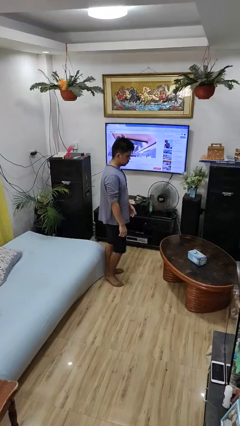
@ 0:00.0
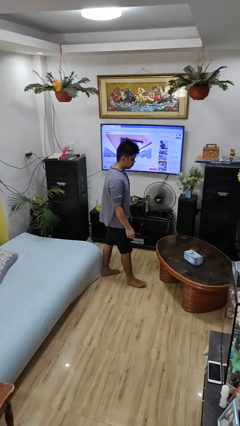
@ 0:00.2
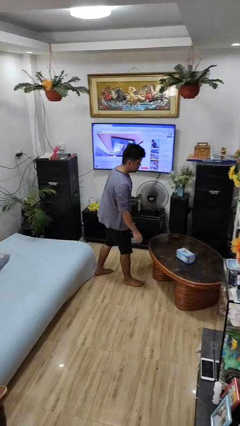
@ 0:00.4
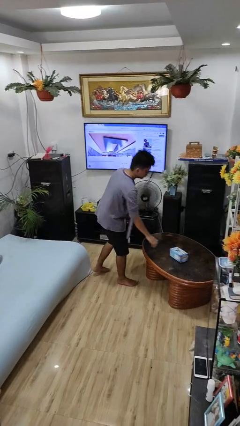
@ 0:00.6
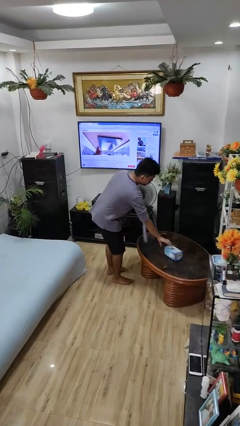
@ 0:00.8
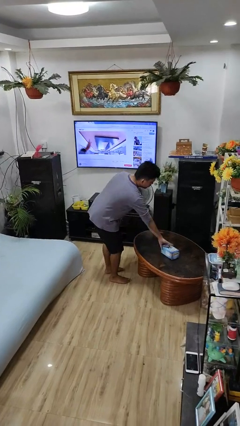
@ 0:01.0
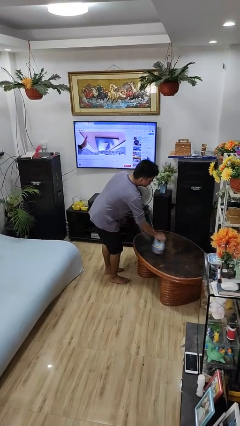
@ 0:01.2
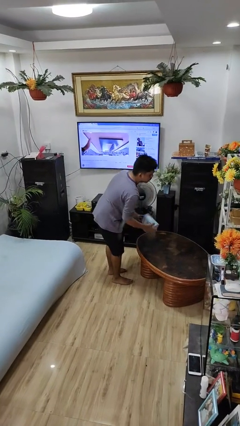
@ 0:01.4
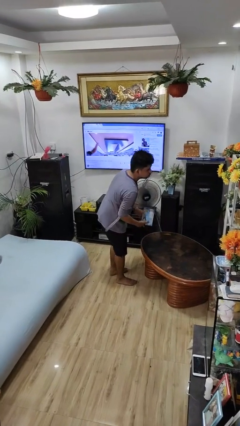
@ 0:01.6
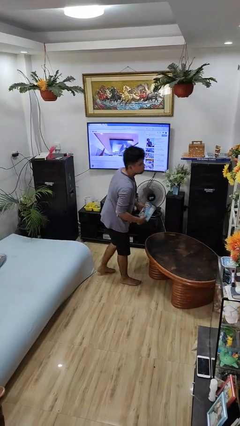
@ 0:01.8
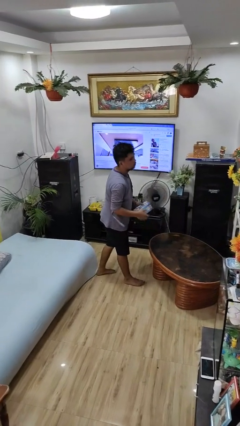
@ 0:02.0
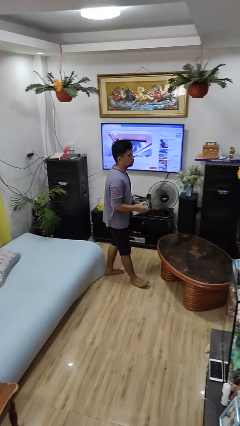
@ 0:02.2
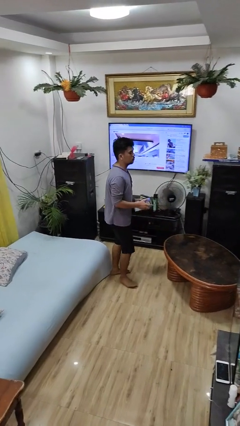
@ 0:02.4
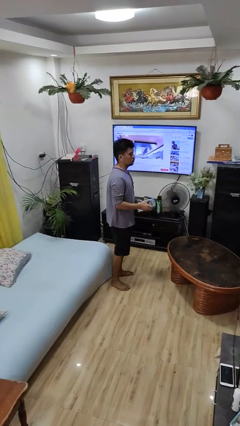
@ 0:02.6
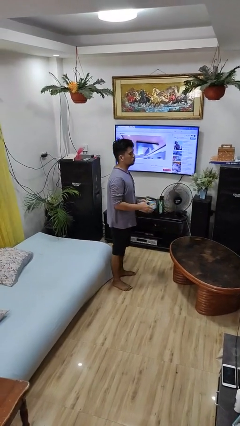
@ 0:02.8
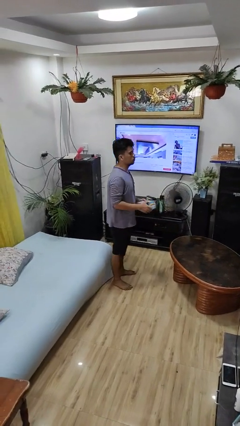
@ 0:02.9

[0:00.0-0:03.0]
person picks up object from table

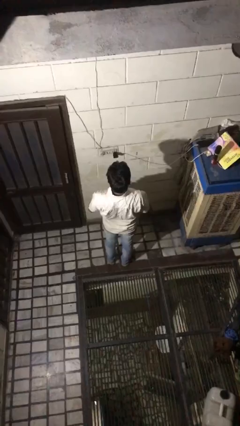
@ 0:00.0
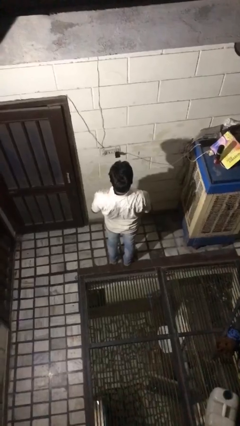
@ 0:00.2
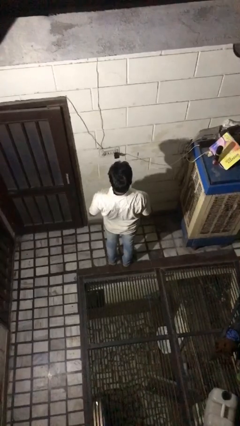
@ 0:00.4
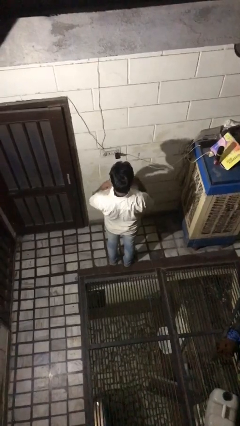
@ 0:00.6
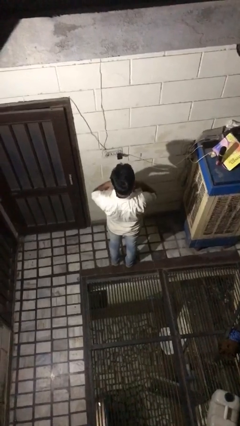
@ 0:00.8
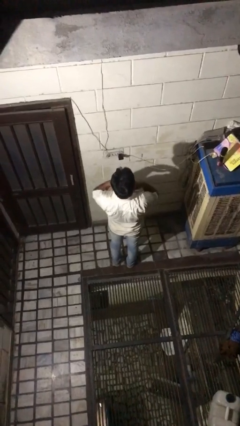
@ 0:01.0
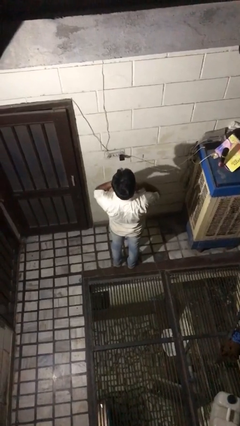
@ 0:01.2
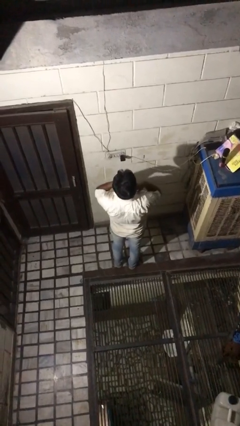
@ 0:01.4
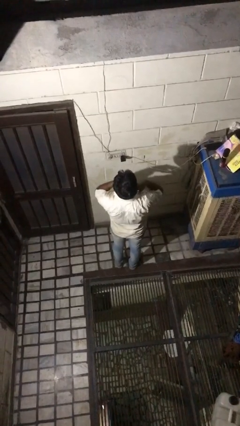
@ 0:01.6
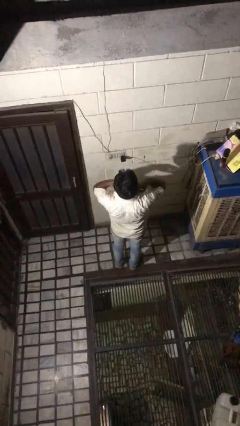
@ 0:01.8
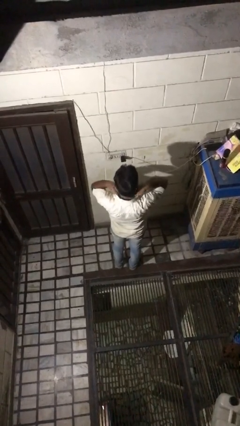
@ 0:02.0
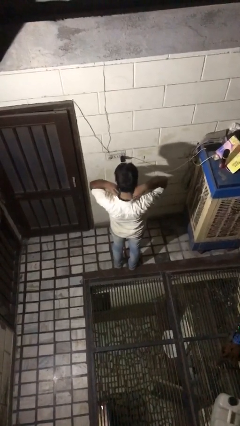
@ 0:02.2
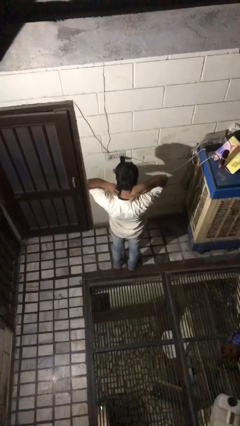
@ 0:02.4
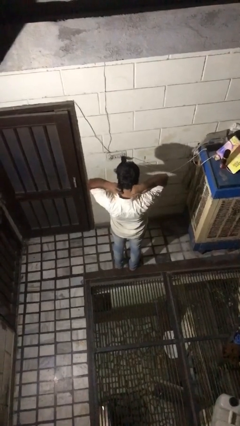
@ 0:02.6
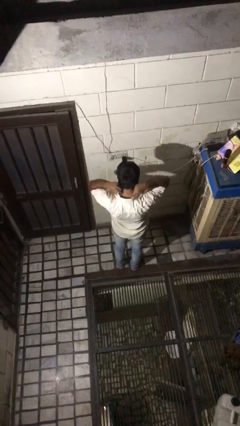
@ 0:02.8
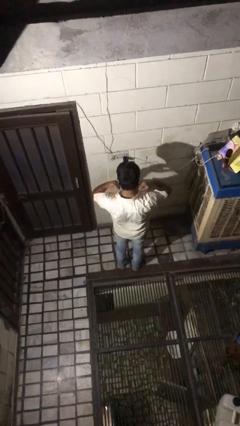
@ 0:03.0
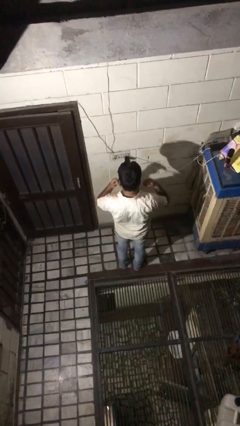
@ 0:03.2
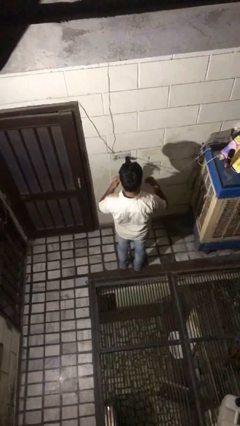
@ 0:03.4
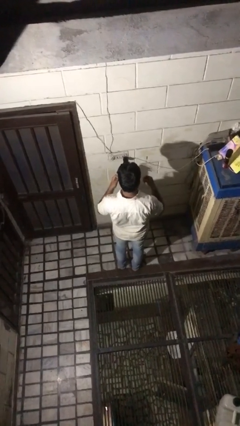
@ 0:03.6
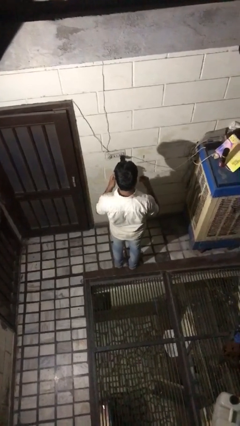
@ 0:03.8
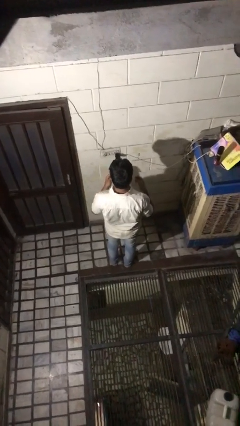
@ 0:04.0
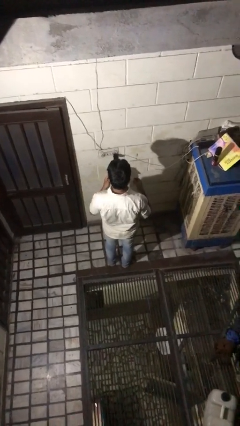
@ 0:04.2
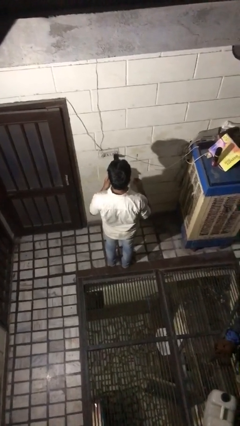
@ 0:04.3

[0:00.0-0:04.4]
person takes off necklace

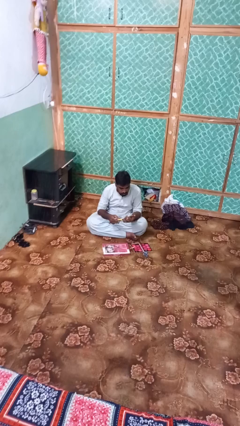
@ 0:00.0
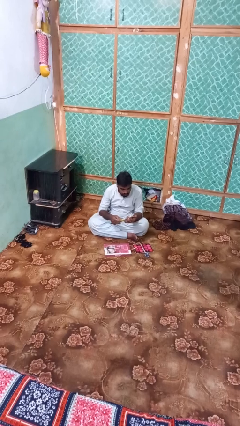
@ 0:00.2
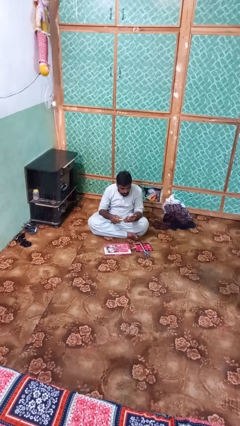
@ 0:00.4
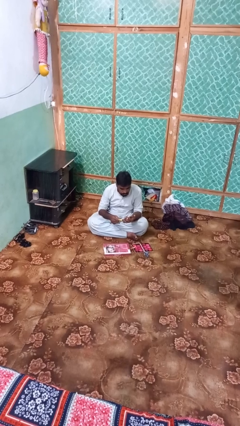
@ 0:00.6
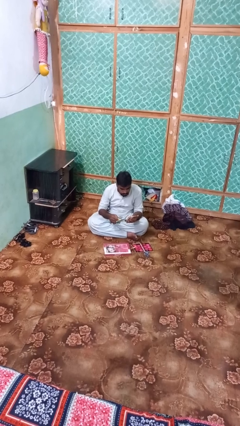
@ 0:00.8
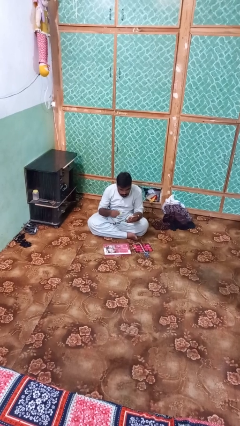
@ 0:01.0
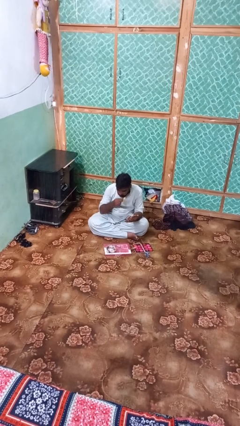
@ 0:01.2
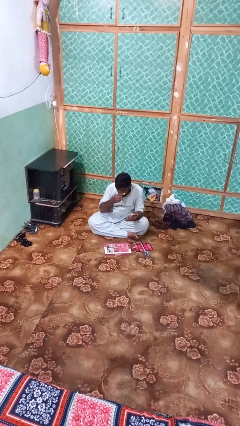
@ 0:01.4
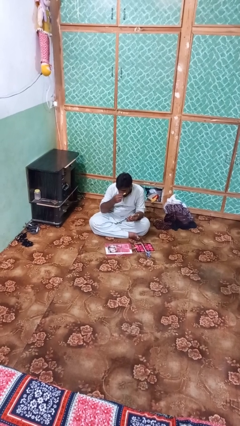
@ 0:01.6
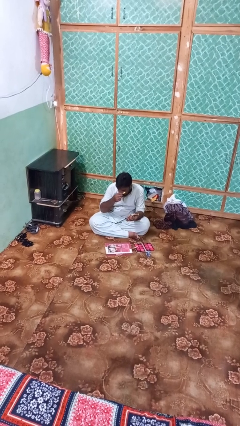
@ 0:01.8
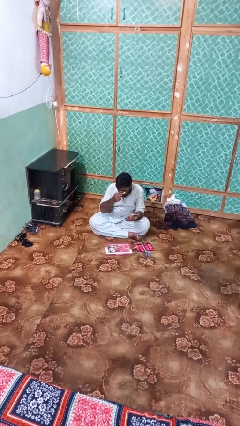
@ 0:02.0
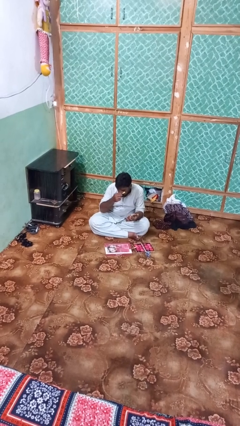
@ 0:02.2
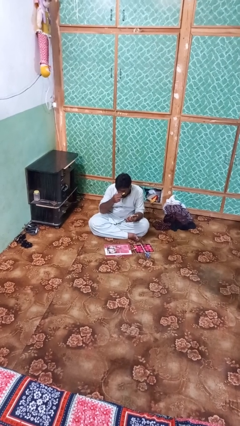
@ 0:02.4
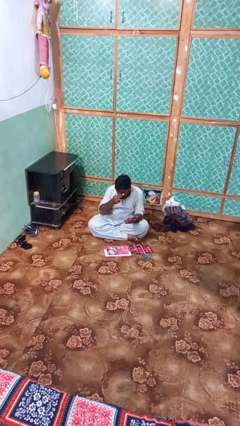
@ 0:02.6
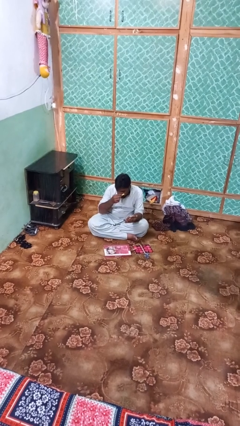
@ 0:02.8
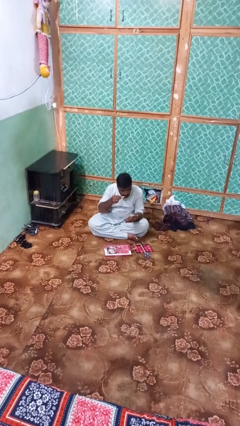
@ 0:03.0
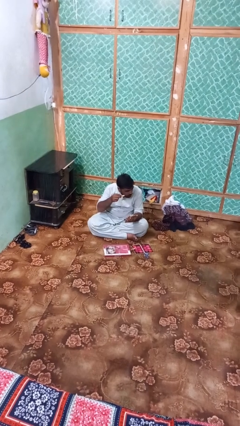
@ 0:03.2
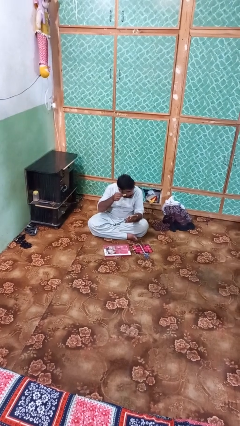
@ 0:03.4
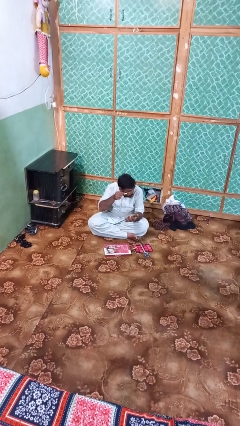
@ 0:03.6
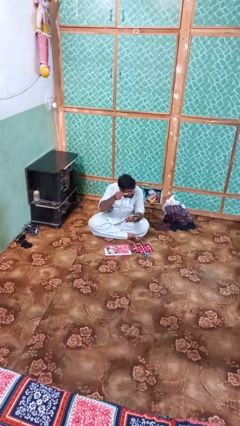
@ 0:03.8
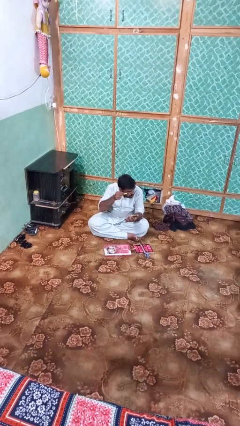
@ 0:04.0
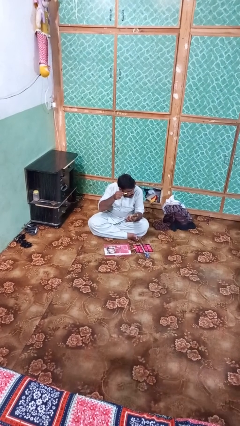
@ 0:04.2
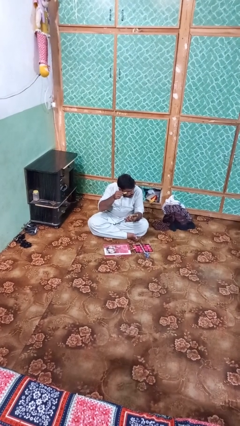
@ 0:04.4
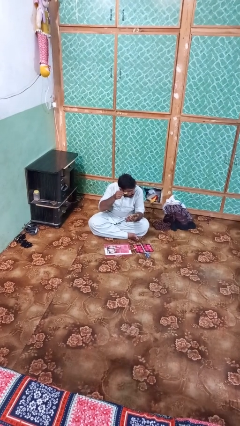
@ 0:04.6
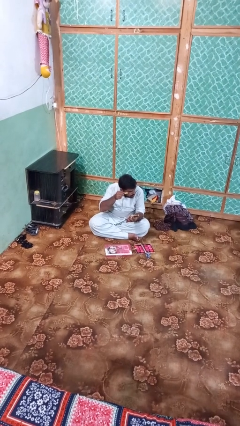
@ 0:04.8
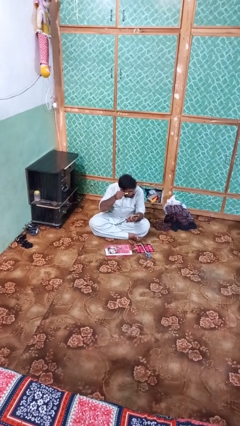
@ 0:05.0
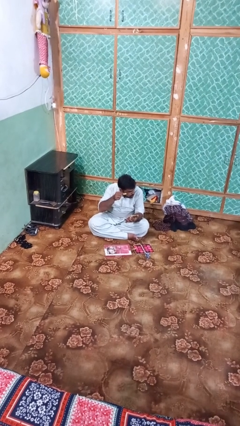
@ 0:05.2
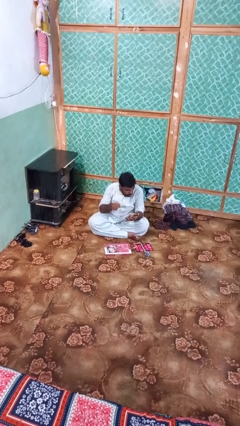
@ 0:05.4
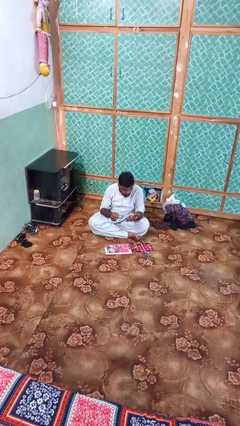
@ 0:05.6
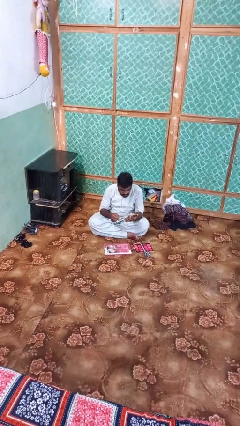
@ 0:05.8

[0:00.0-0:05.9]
person applies eye makeup

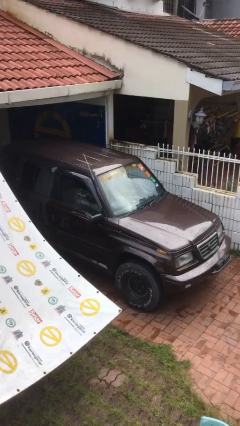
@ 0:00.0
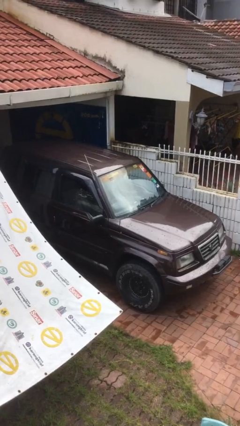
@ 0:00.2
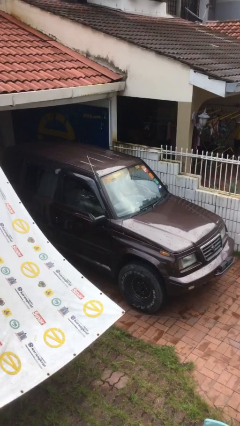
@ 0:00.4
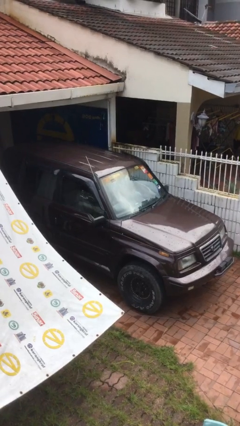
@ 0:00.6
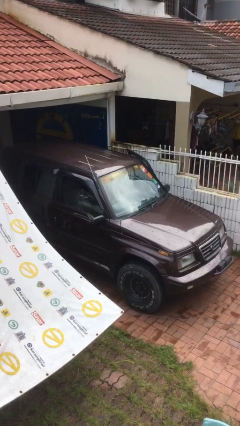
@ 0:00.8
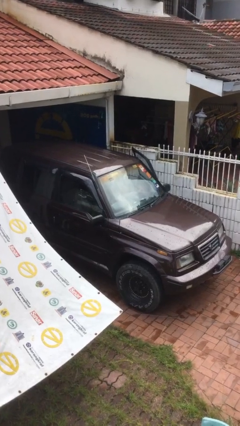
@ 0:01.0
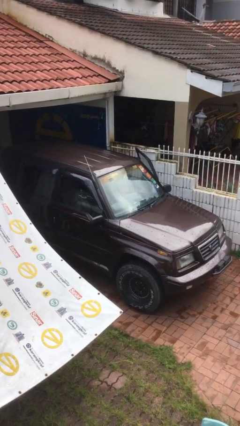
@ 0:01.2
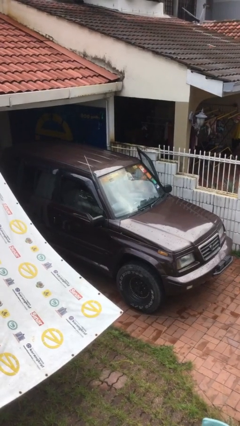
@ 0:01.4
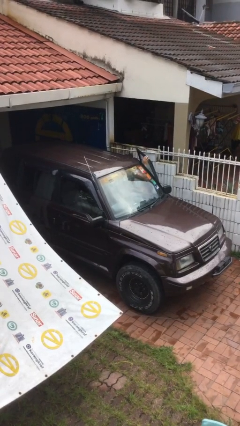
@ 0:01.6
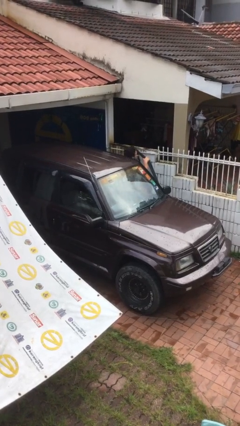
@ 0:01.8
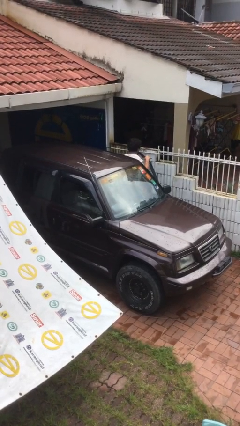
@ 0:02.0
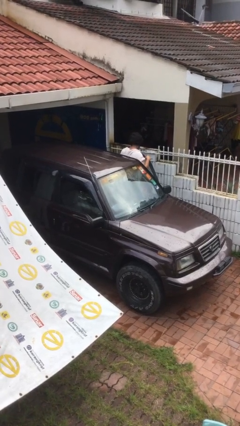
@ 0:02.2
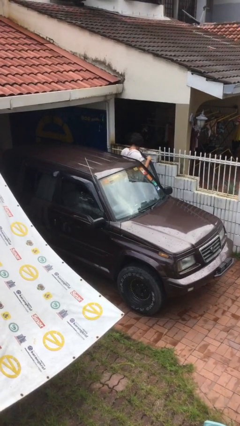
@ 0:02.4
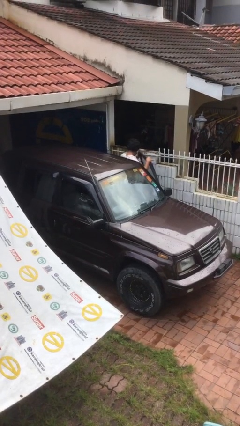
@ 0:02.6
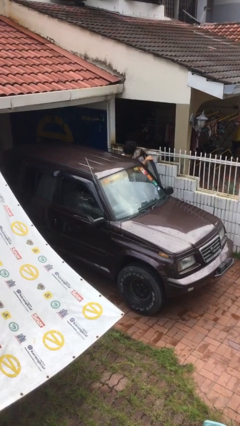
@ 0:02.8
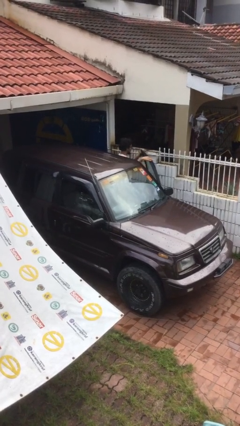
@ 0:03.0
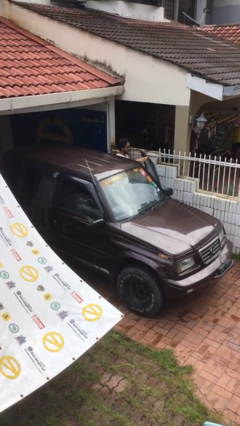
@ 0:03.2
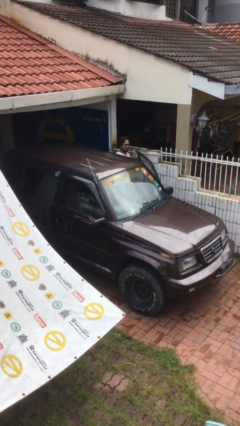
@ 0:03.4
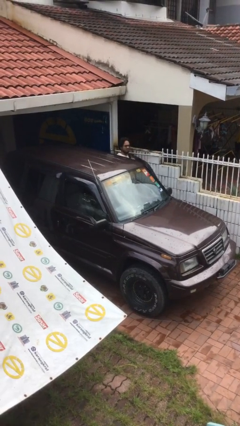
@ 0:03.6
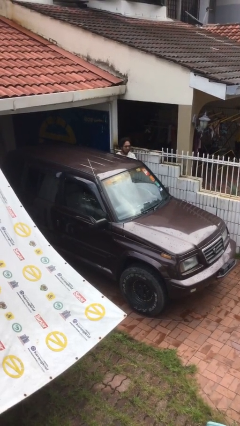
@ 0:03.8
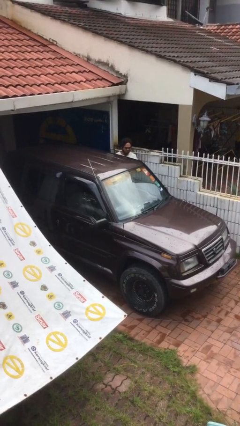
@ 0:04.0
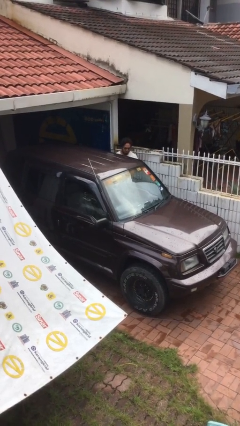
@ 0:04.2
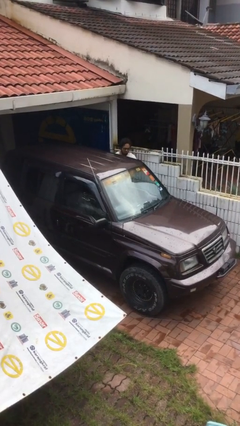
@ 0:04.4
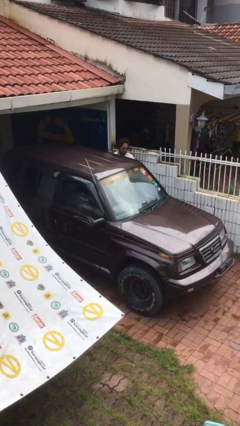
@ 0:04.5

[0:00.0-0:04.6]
car drops off person
